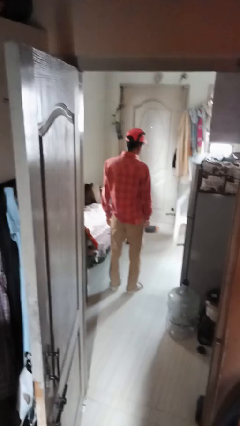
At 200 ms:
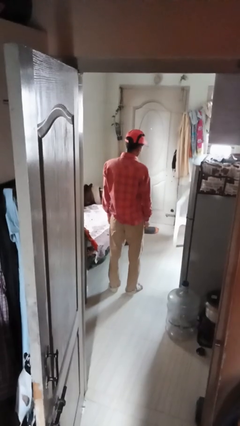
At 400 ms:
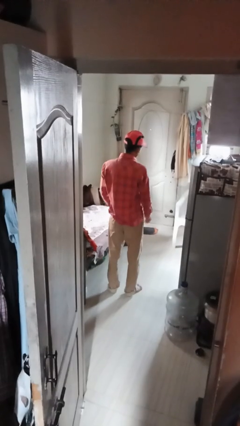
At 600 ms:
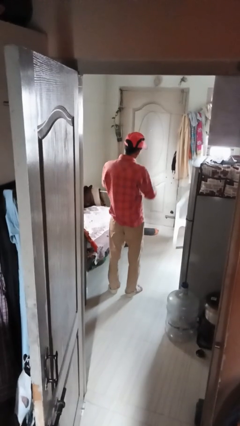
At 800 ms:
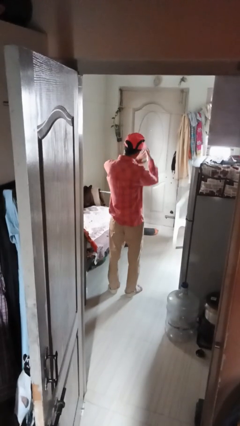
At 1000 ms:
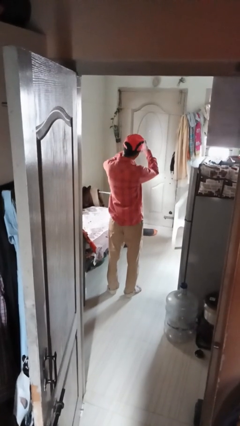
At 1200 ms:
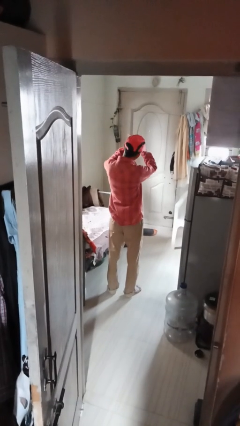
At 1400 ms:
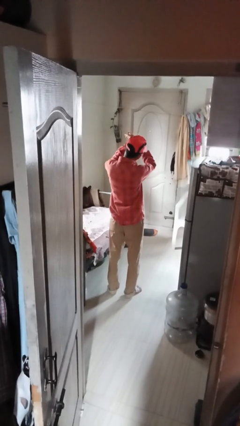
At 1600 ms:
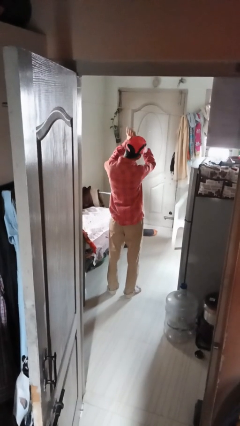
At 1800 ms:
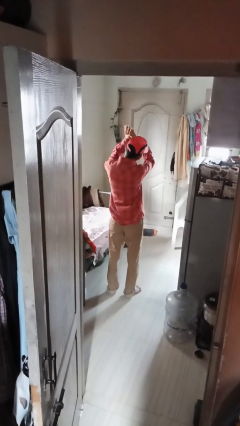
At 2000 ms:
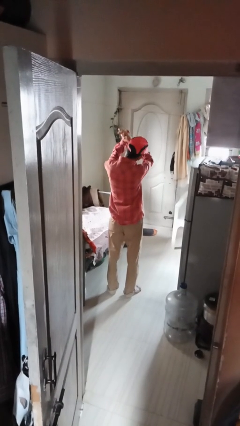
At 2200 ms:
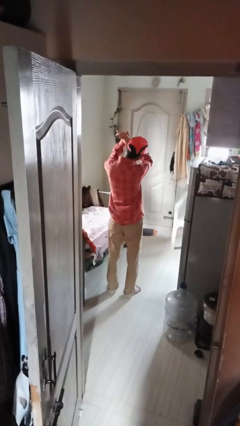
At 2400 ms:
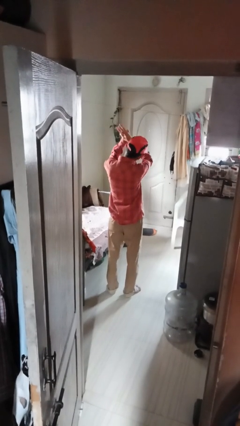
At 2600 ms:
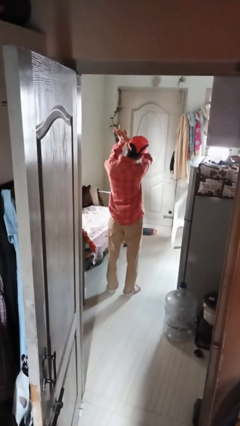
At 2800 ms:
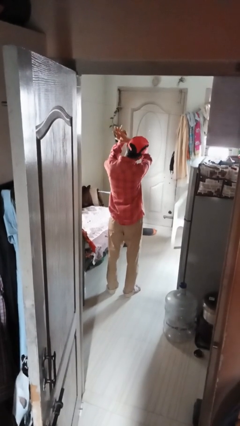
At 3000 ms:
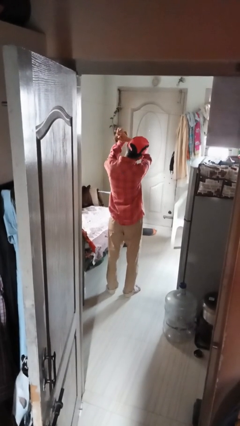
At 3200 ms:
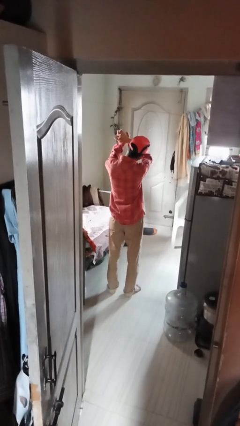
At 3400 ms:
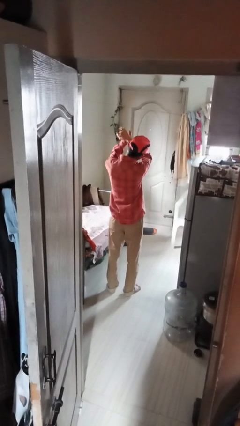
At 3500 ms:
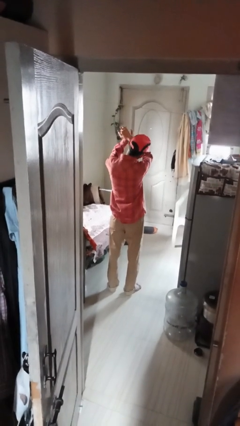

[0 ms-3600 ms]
person cracks knuckles

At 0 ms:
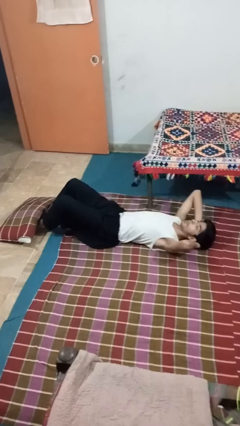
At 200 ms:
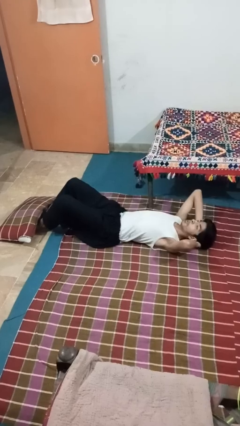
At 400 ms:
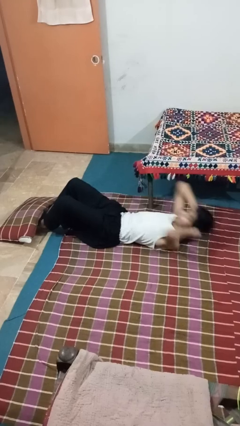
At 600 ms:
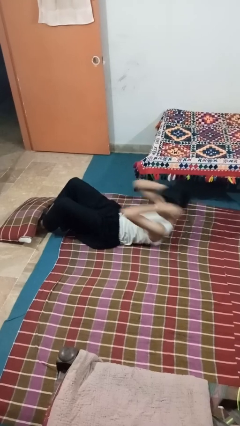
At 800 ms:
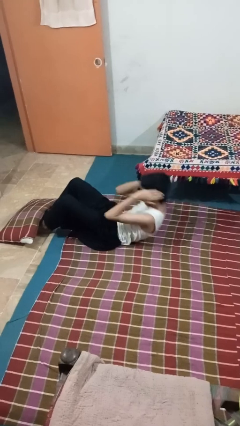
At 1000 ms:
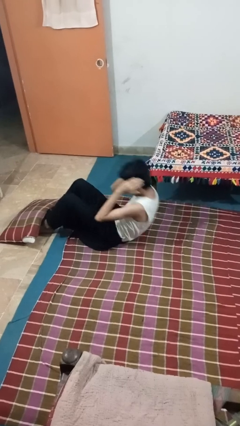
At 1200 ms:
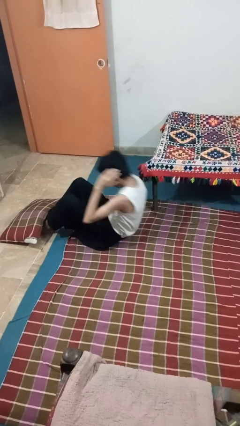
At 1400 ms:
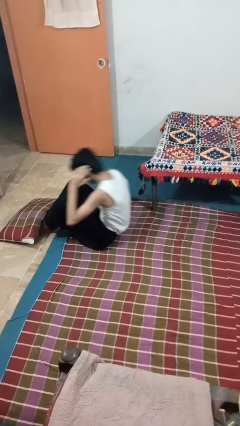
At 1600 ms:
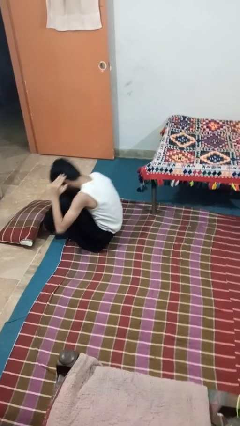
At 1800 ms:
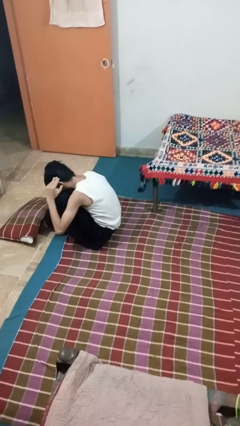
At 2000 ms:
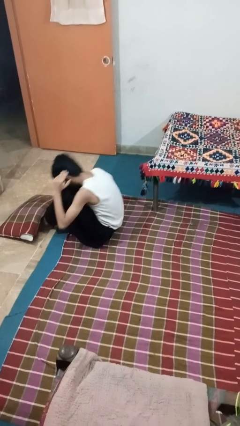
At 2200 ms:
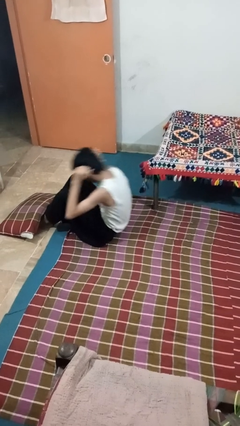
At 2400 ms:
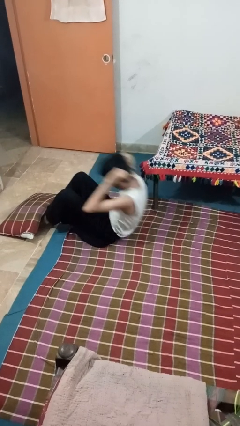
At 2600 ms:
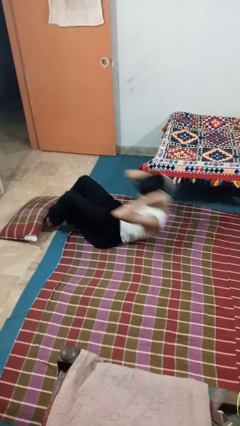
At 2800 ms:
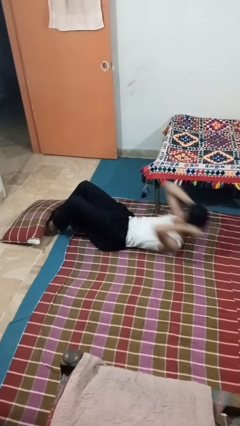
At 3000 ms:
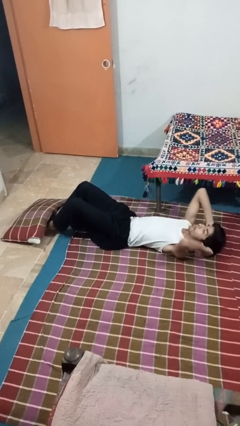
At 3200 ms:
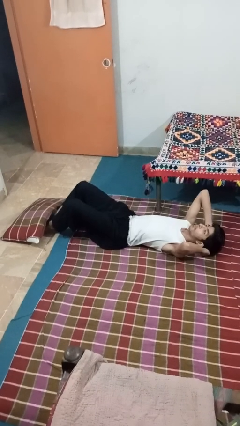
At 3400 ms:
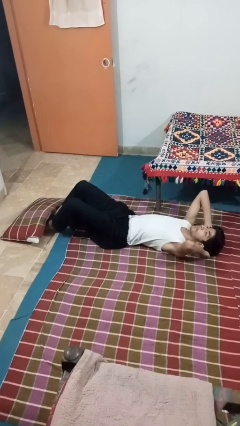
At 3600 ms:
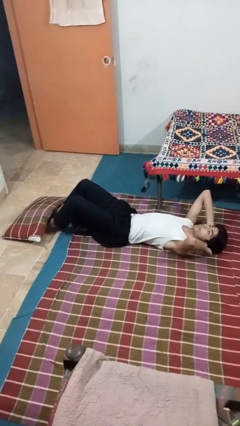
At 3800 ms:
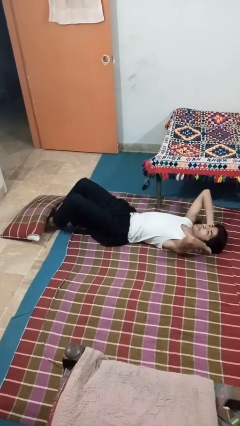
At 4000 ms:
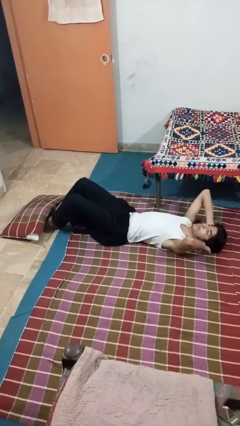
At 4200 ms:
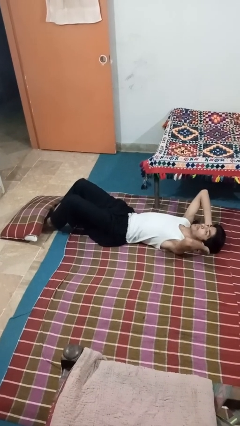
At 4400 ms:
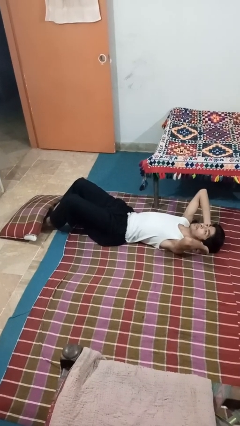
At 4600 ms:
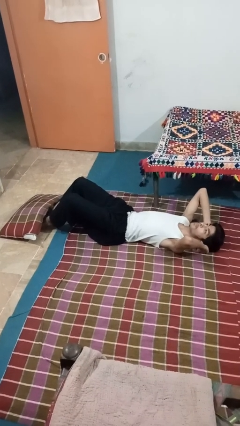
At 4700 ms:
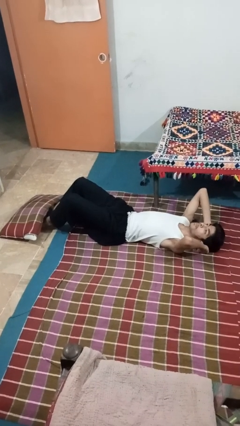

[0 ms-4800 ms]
person exercises with situp

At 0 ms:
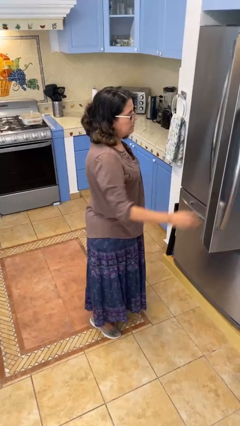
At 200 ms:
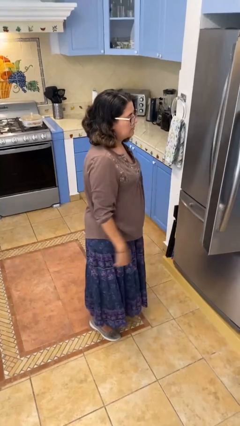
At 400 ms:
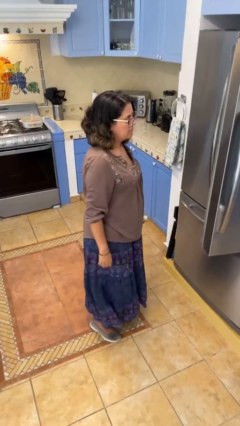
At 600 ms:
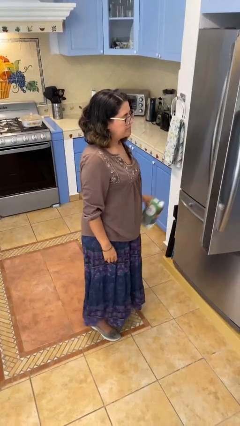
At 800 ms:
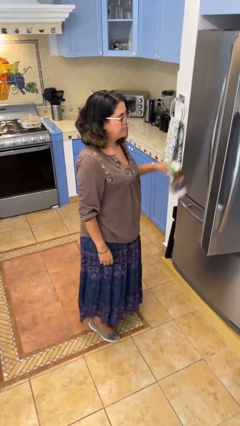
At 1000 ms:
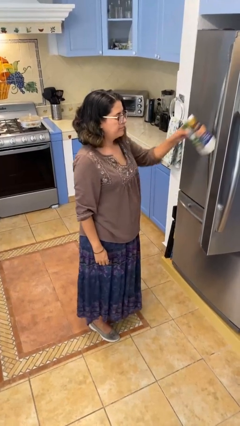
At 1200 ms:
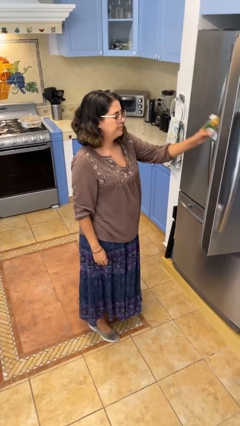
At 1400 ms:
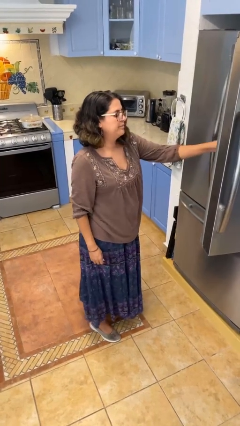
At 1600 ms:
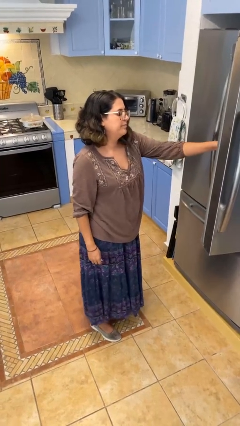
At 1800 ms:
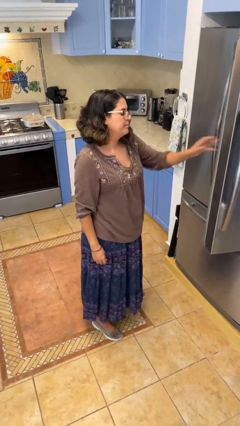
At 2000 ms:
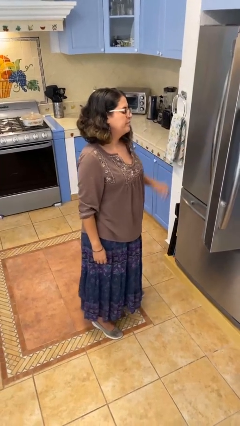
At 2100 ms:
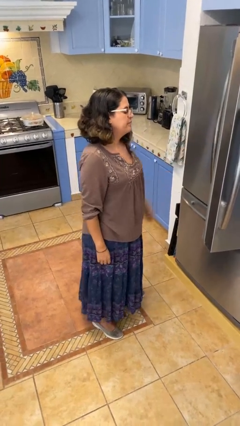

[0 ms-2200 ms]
person puts object into refrigerator

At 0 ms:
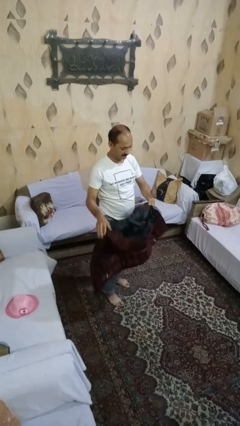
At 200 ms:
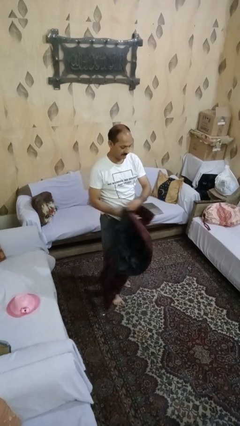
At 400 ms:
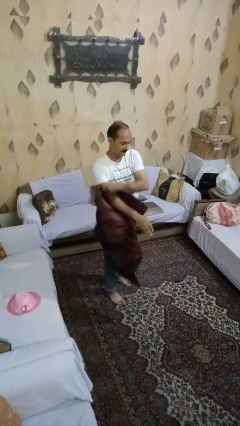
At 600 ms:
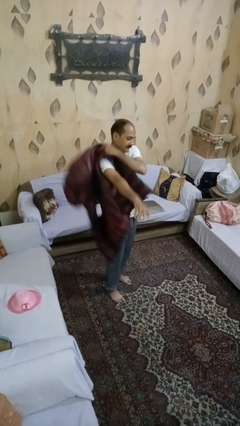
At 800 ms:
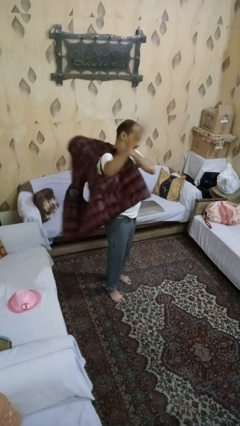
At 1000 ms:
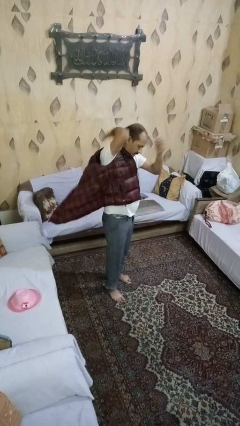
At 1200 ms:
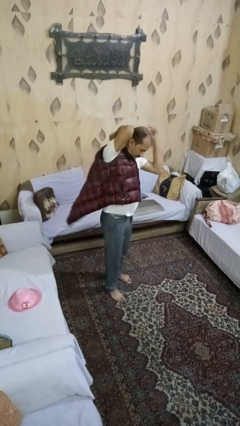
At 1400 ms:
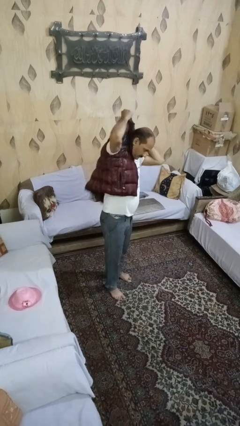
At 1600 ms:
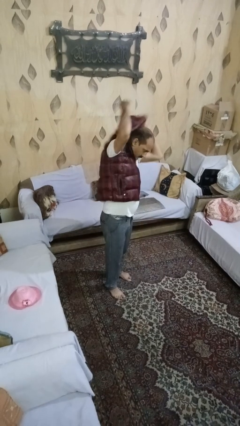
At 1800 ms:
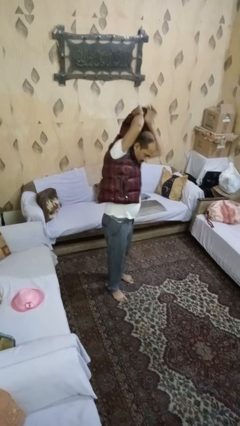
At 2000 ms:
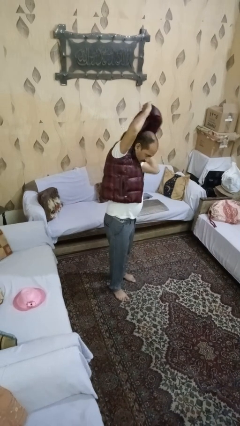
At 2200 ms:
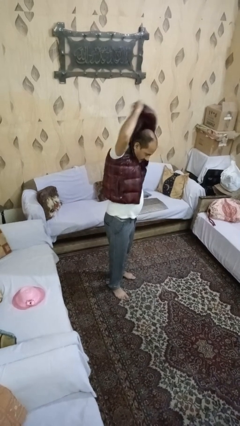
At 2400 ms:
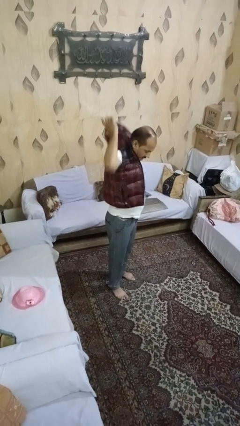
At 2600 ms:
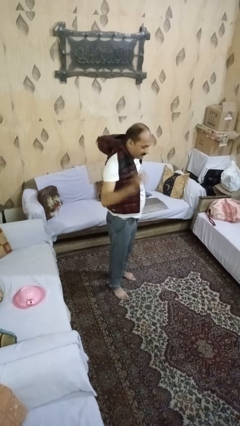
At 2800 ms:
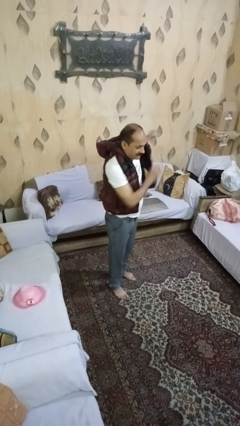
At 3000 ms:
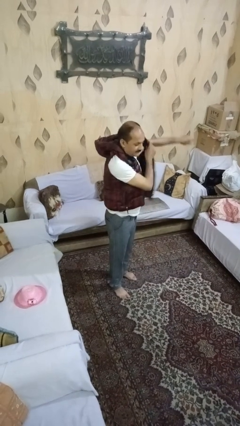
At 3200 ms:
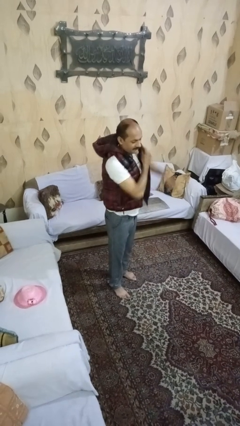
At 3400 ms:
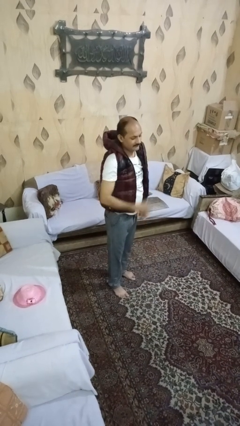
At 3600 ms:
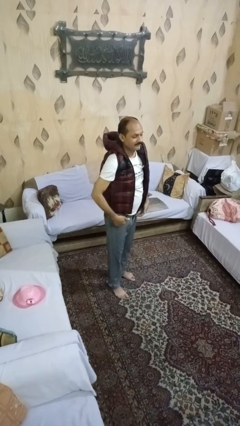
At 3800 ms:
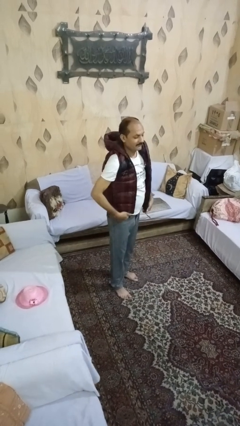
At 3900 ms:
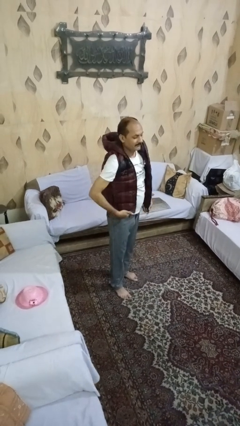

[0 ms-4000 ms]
person puts on jacket

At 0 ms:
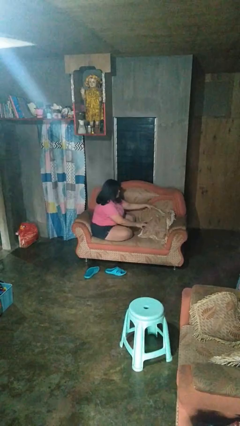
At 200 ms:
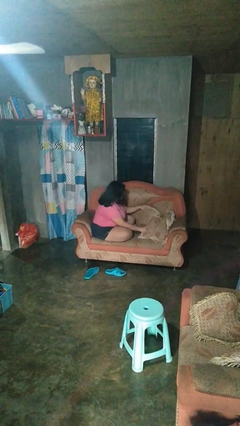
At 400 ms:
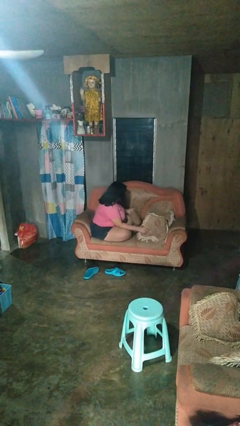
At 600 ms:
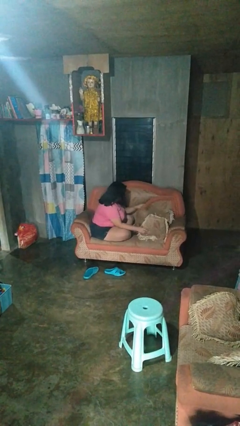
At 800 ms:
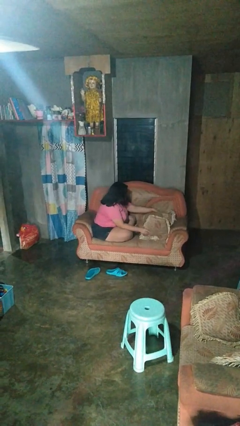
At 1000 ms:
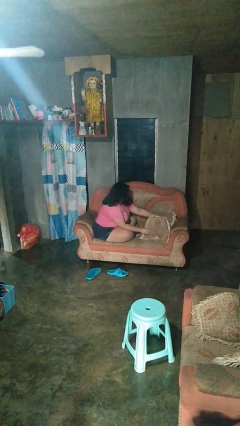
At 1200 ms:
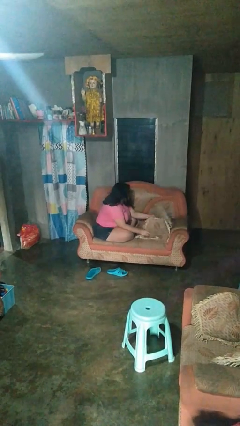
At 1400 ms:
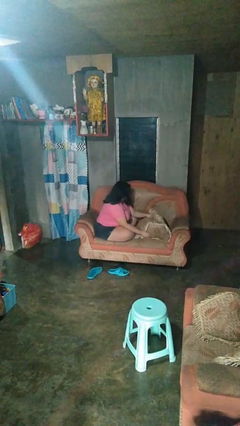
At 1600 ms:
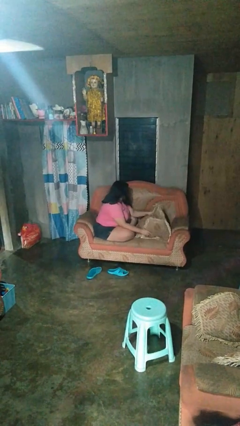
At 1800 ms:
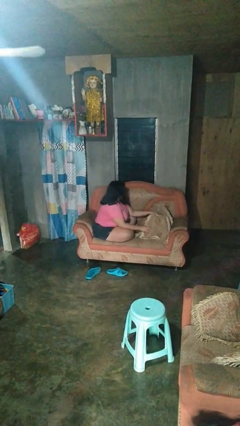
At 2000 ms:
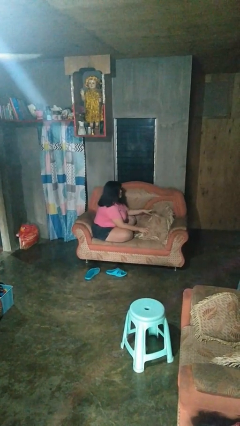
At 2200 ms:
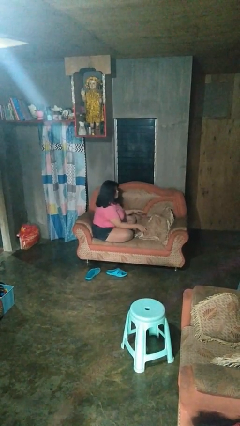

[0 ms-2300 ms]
person searches in couch

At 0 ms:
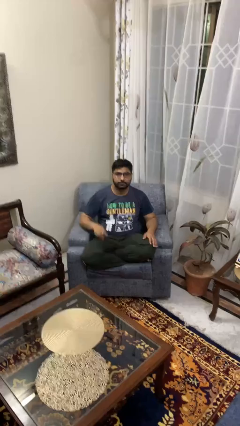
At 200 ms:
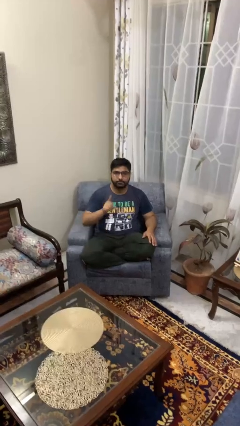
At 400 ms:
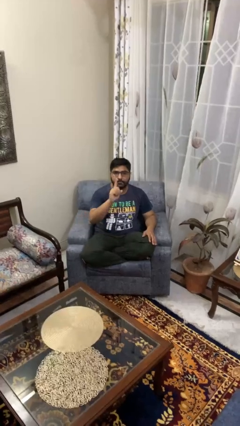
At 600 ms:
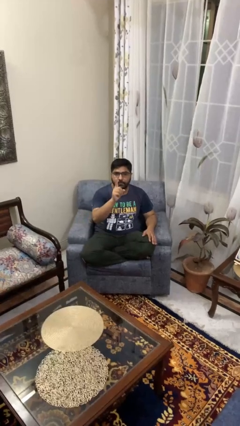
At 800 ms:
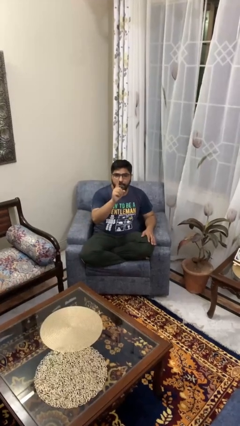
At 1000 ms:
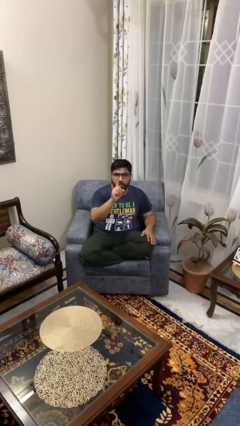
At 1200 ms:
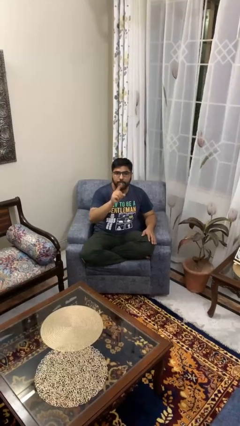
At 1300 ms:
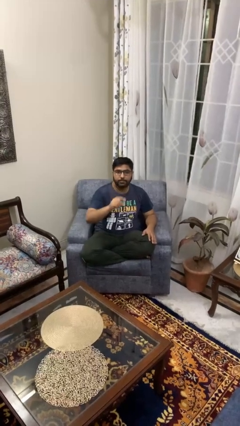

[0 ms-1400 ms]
person gestures number one
